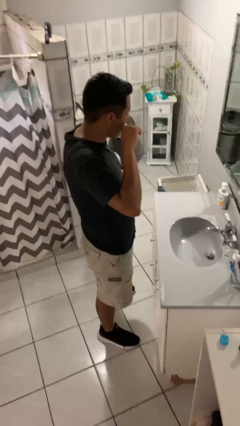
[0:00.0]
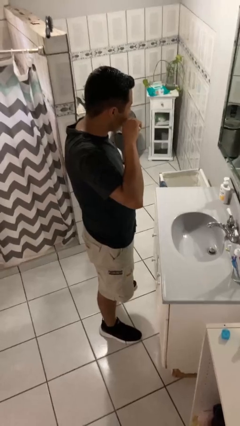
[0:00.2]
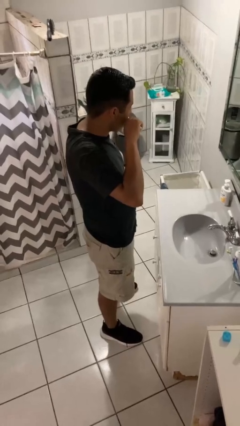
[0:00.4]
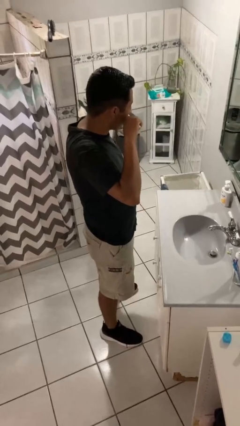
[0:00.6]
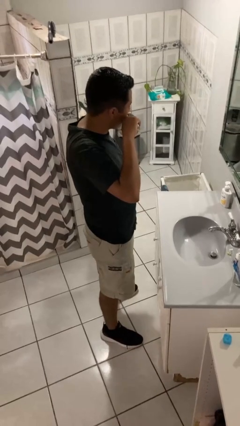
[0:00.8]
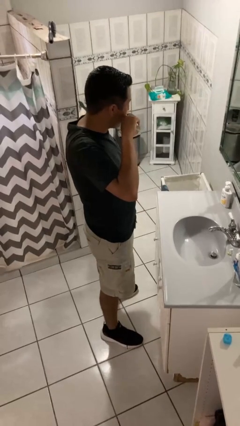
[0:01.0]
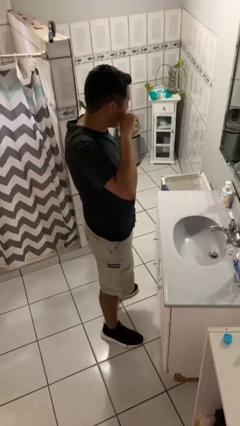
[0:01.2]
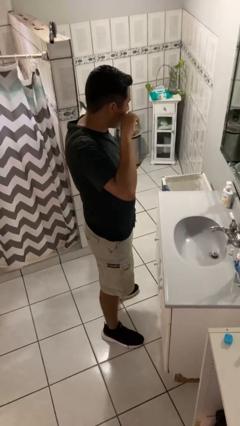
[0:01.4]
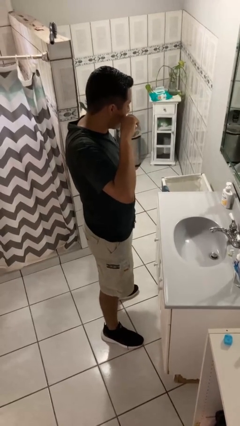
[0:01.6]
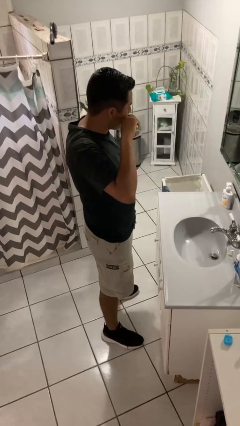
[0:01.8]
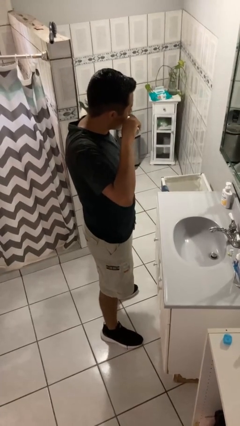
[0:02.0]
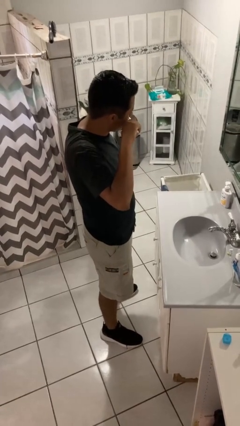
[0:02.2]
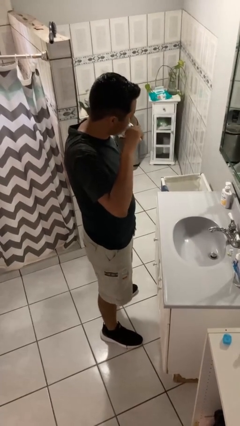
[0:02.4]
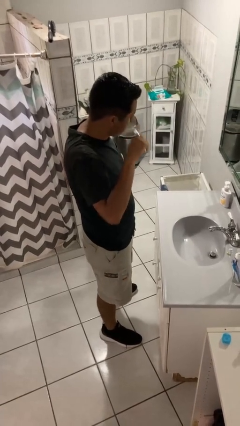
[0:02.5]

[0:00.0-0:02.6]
person brushes teeth

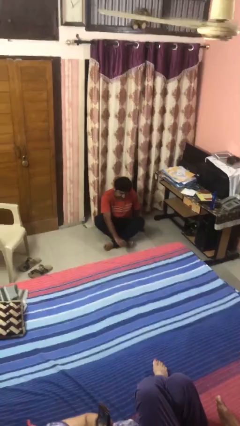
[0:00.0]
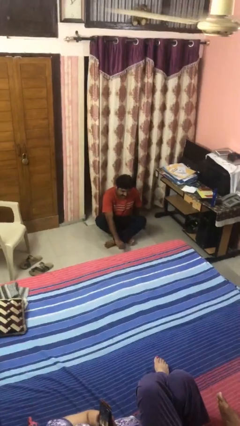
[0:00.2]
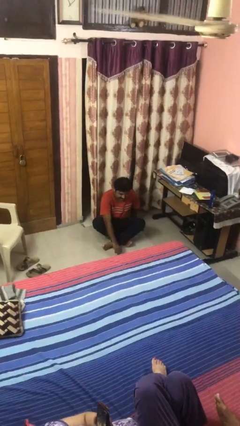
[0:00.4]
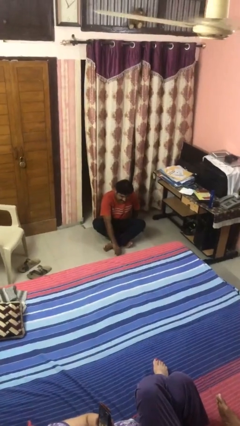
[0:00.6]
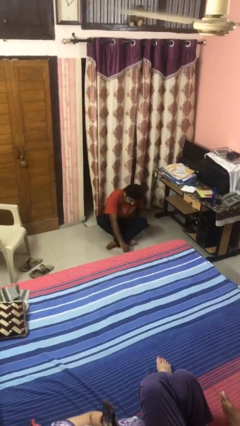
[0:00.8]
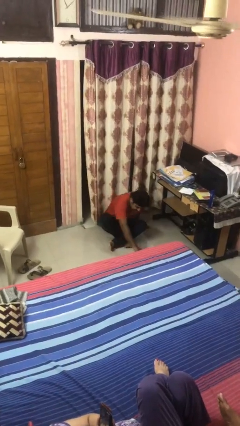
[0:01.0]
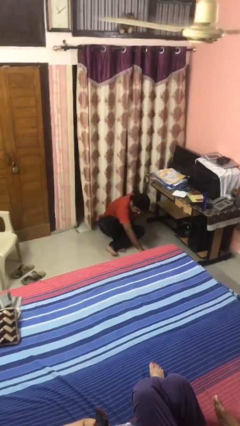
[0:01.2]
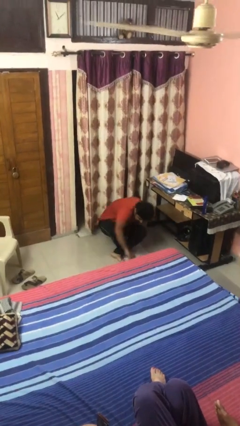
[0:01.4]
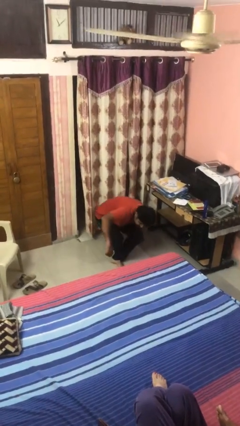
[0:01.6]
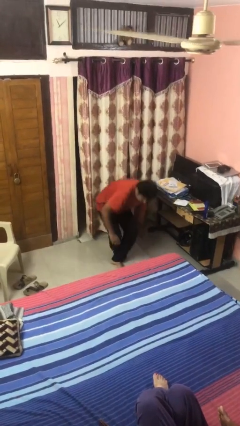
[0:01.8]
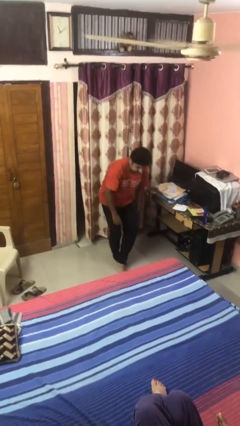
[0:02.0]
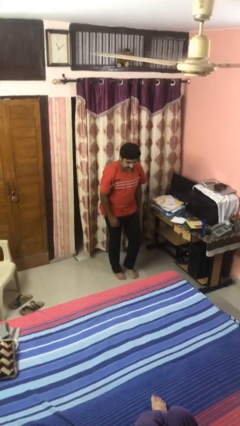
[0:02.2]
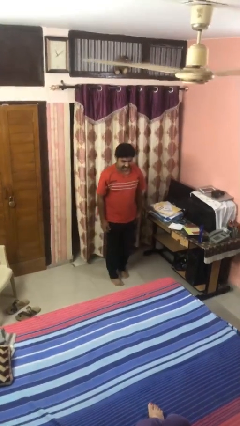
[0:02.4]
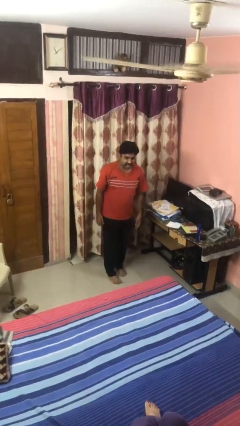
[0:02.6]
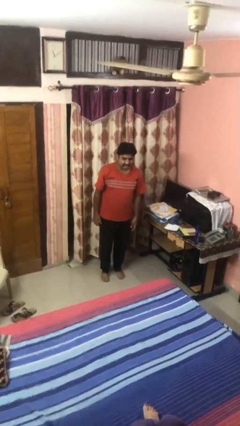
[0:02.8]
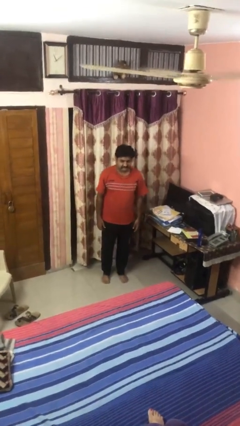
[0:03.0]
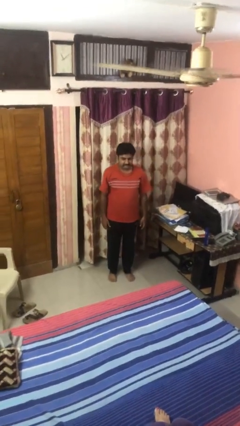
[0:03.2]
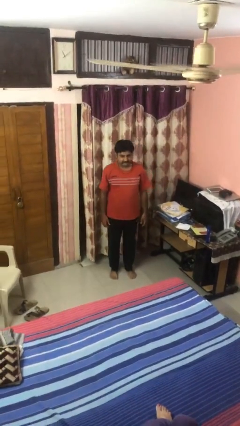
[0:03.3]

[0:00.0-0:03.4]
person stands up from floor

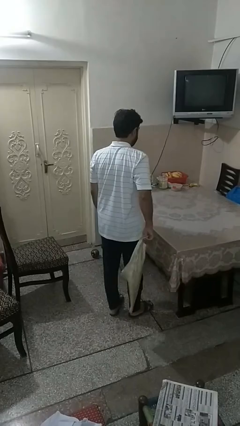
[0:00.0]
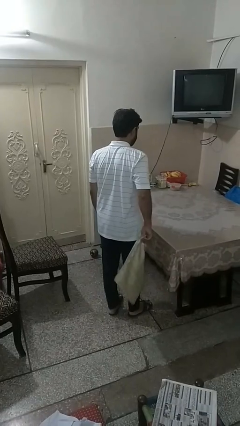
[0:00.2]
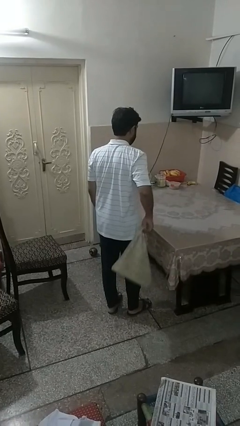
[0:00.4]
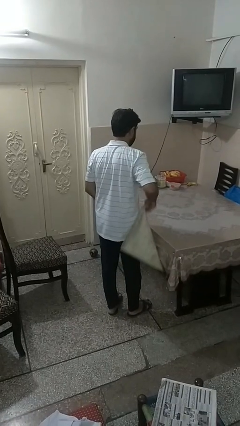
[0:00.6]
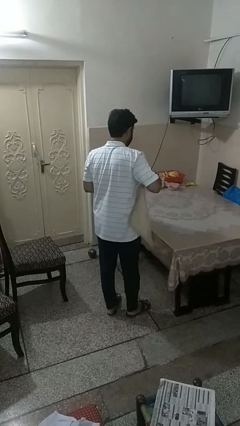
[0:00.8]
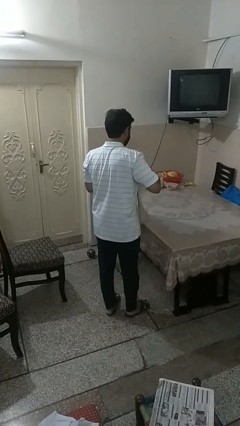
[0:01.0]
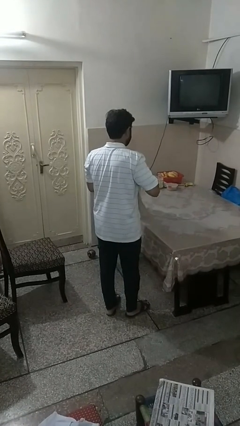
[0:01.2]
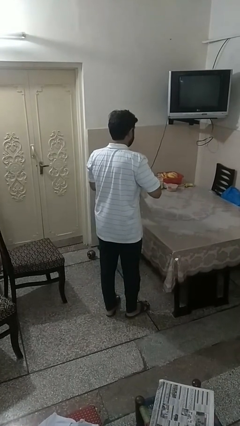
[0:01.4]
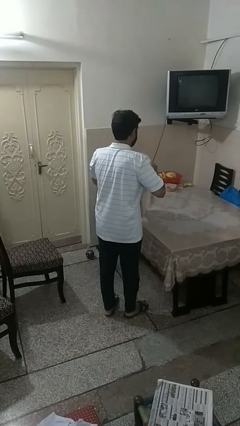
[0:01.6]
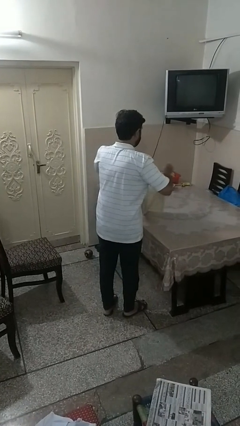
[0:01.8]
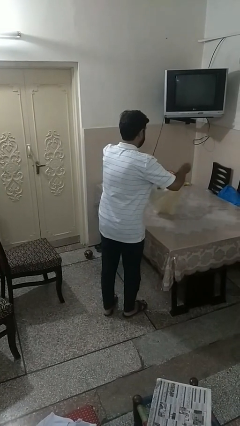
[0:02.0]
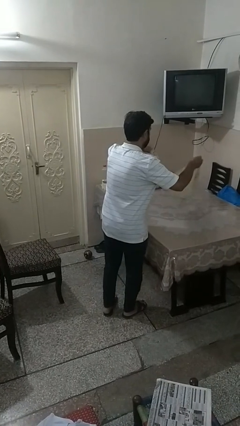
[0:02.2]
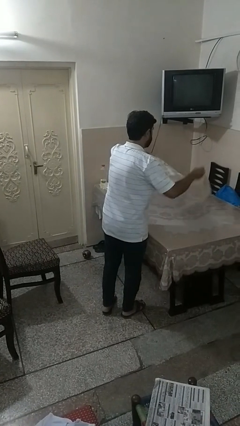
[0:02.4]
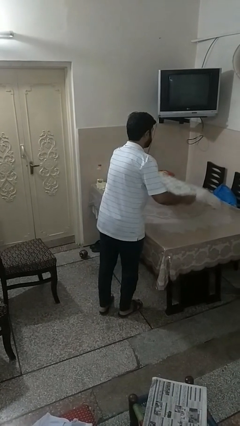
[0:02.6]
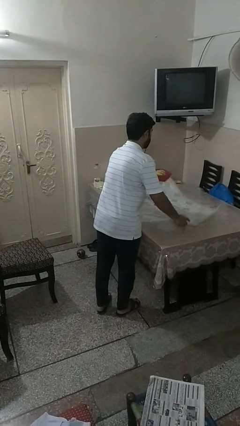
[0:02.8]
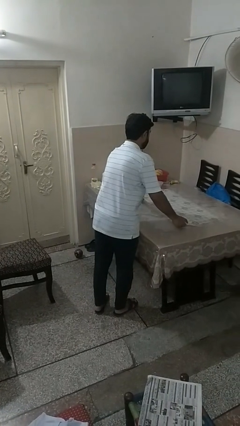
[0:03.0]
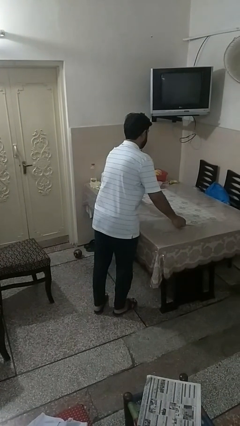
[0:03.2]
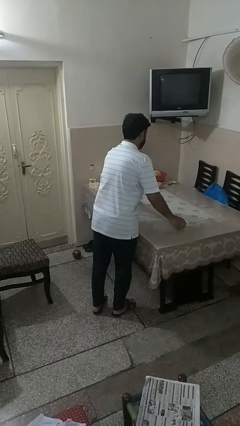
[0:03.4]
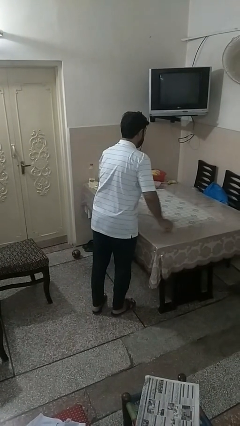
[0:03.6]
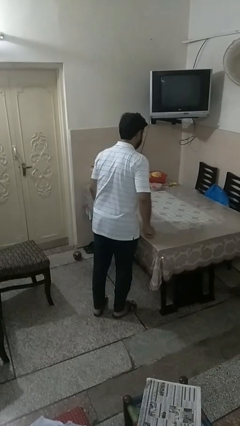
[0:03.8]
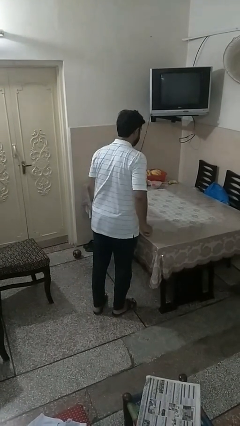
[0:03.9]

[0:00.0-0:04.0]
person spreads tablecloth

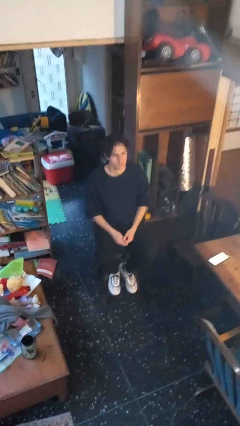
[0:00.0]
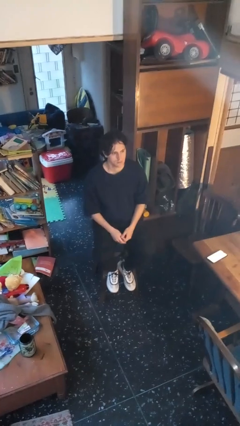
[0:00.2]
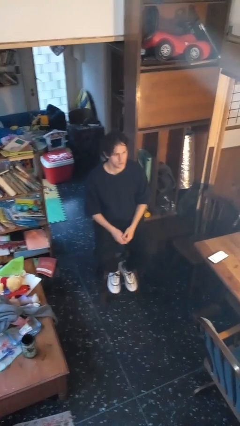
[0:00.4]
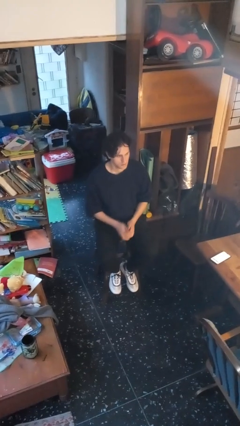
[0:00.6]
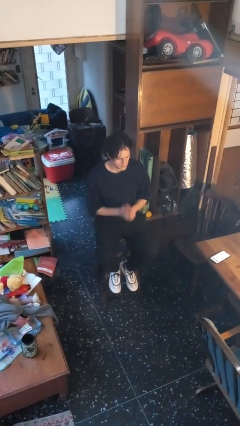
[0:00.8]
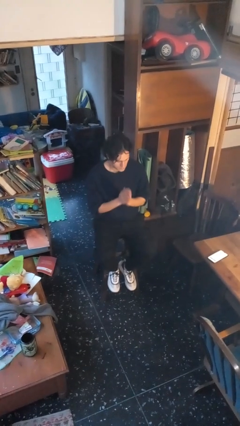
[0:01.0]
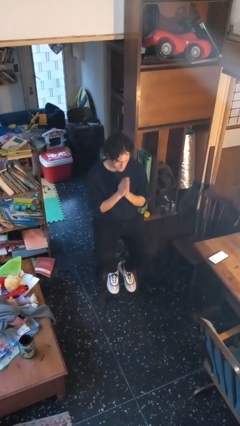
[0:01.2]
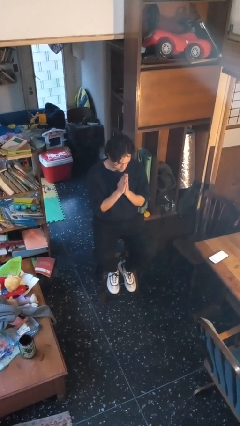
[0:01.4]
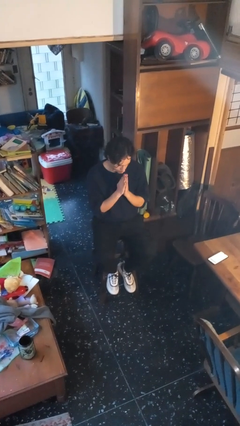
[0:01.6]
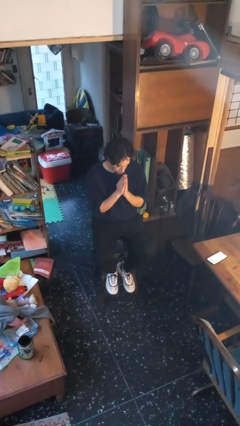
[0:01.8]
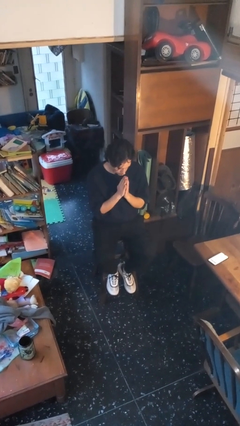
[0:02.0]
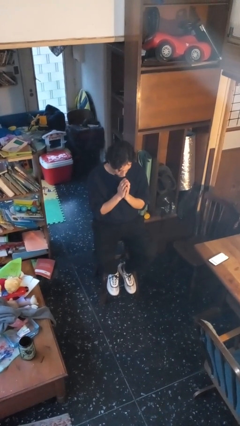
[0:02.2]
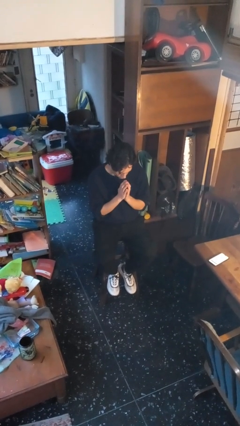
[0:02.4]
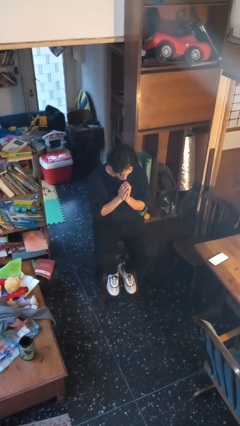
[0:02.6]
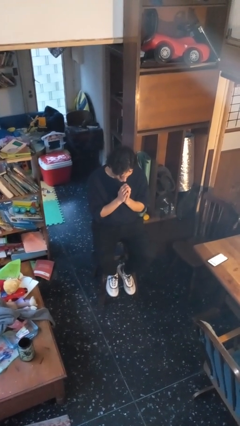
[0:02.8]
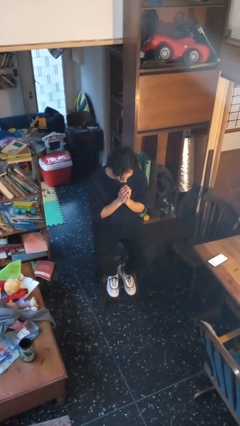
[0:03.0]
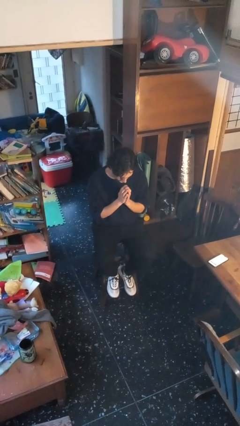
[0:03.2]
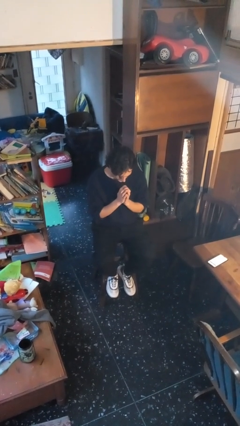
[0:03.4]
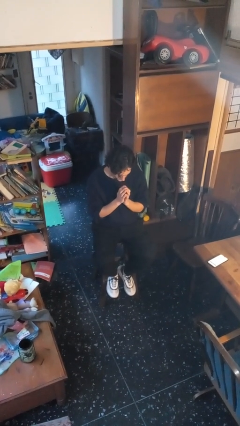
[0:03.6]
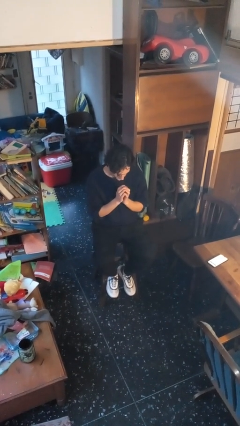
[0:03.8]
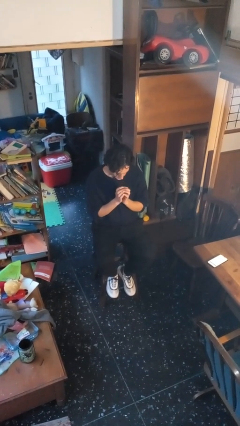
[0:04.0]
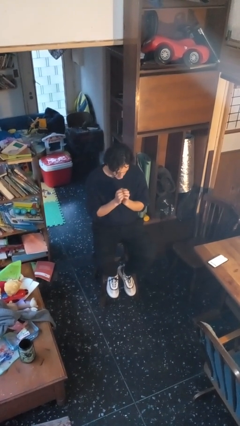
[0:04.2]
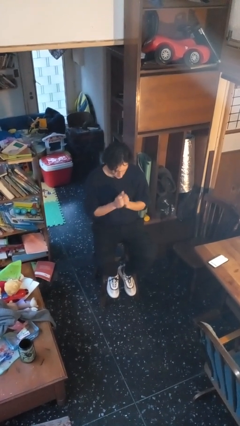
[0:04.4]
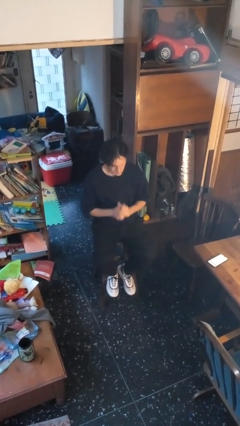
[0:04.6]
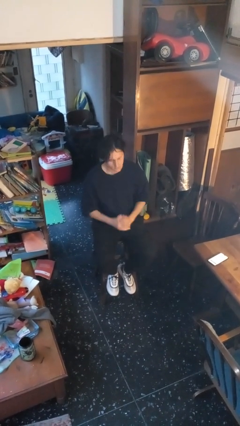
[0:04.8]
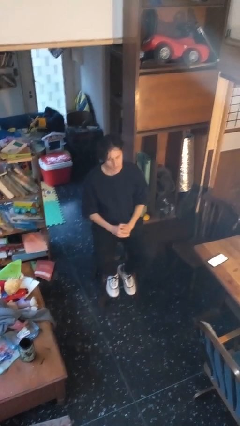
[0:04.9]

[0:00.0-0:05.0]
person prays

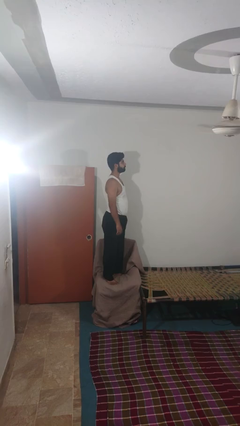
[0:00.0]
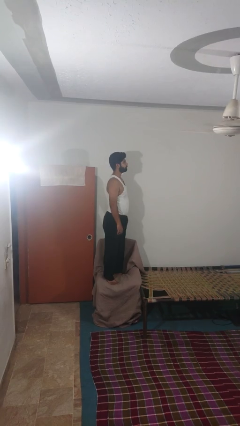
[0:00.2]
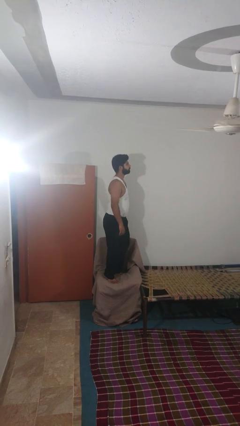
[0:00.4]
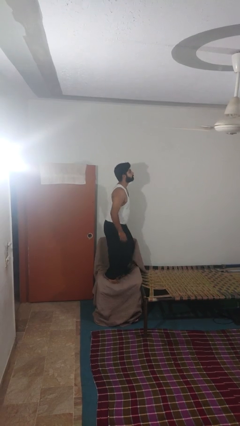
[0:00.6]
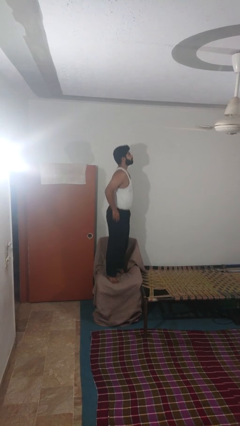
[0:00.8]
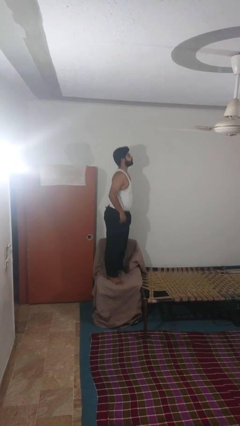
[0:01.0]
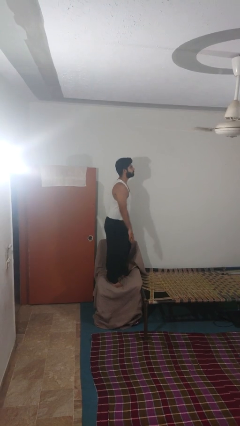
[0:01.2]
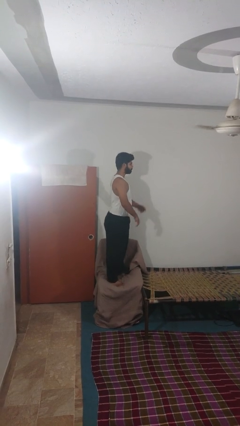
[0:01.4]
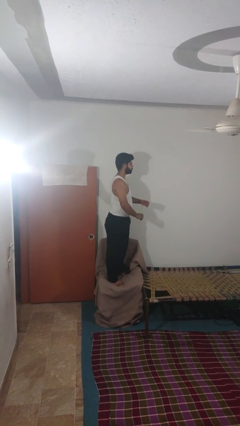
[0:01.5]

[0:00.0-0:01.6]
person jumps on couch

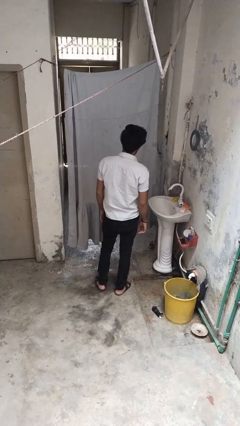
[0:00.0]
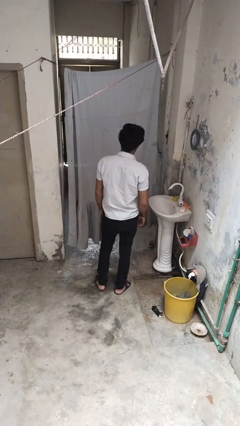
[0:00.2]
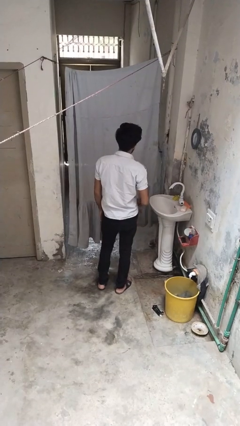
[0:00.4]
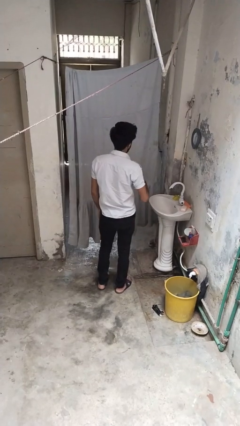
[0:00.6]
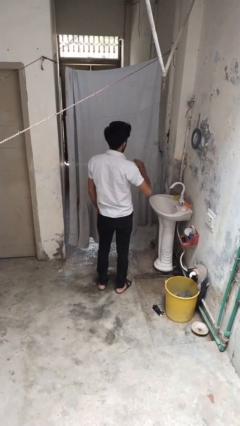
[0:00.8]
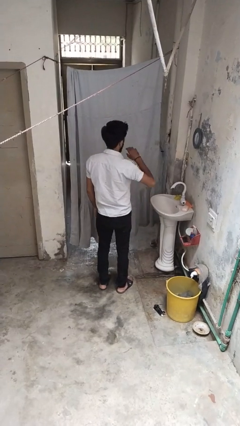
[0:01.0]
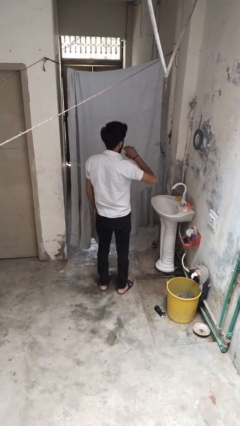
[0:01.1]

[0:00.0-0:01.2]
person yawns
